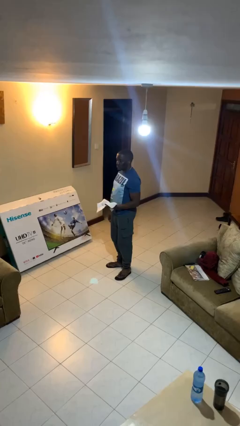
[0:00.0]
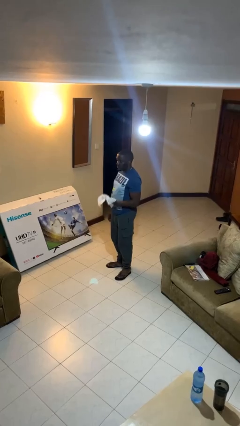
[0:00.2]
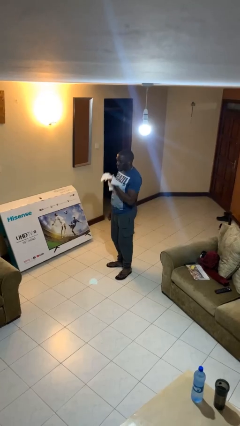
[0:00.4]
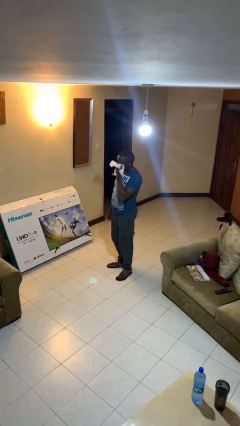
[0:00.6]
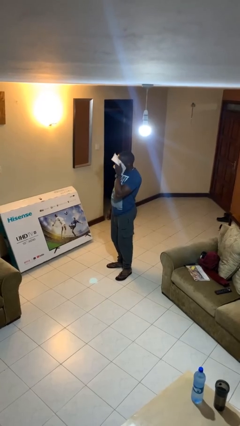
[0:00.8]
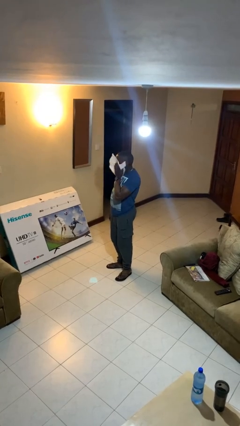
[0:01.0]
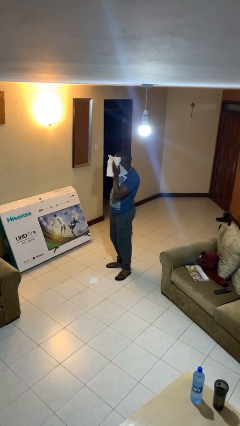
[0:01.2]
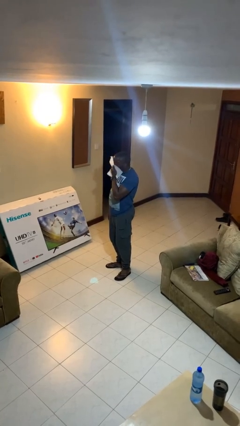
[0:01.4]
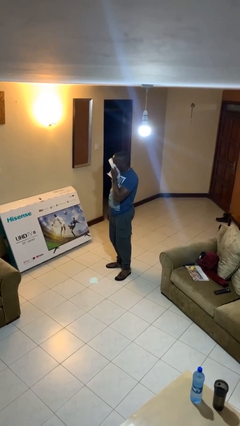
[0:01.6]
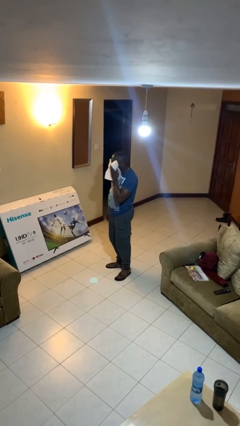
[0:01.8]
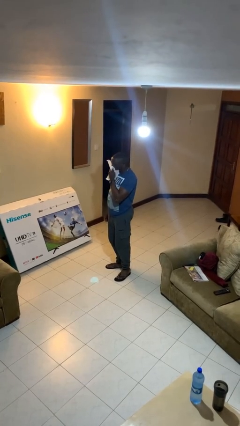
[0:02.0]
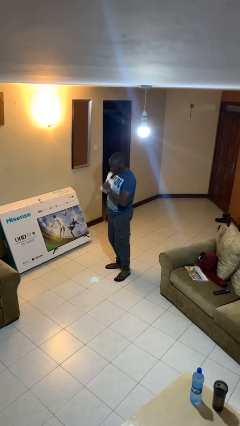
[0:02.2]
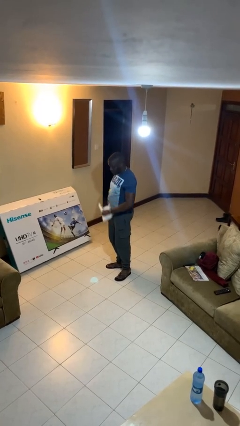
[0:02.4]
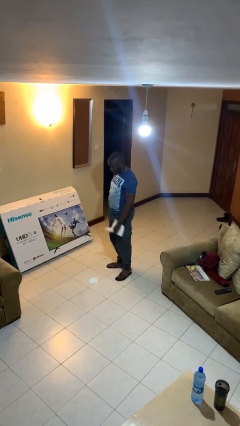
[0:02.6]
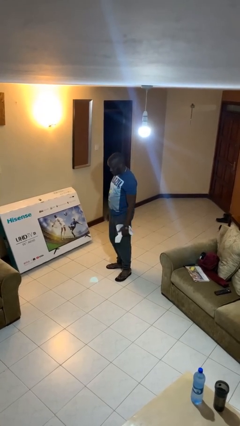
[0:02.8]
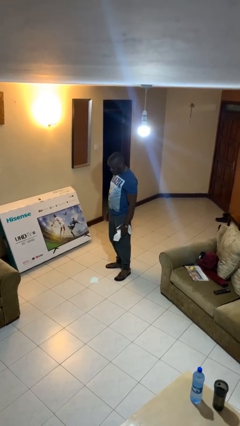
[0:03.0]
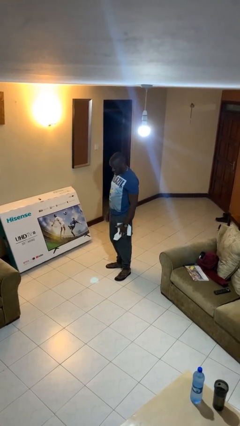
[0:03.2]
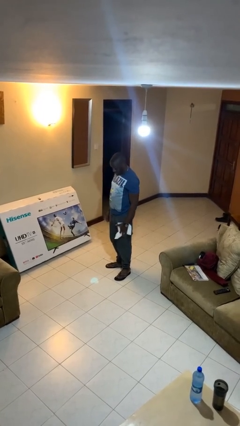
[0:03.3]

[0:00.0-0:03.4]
person wipes mouth with napkin

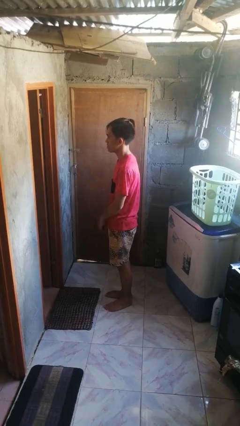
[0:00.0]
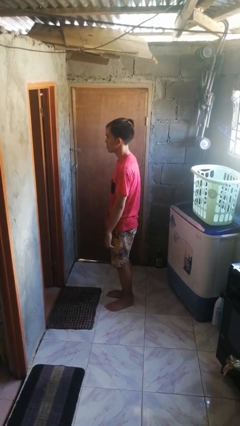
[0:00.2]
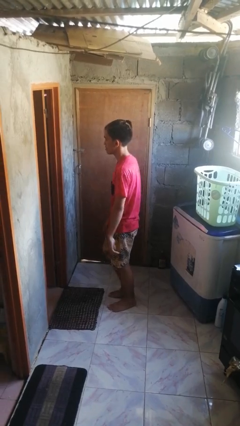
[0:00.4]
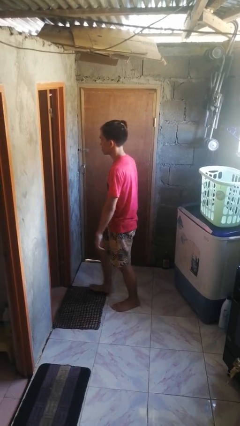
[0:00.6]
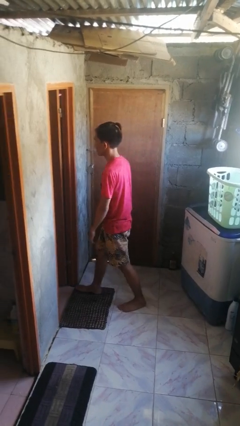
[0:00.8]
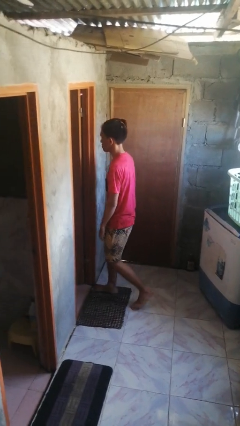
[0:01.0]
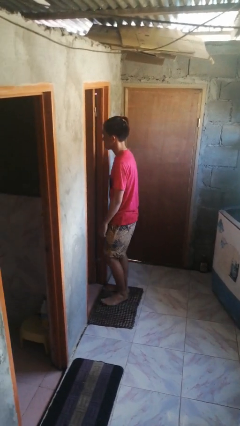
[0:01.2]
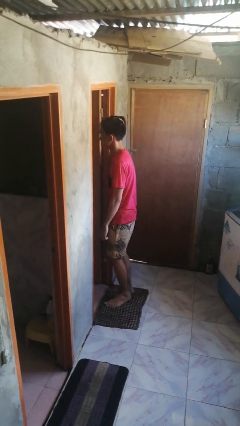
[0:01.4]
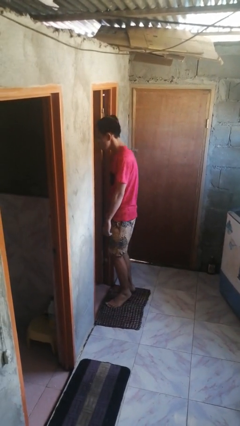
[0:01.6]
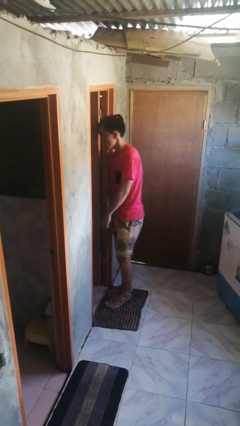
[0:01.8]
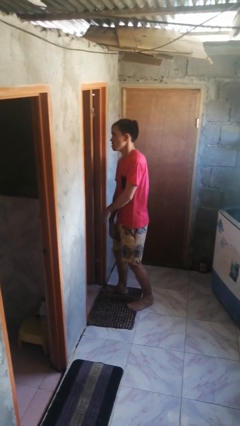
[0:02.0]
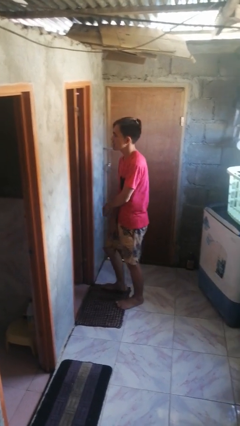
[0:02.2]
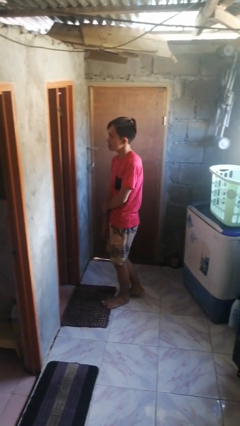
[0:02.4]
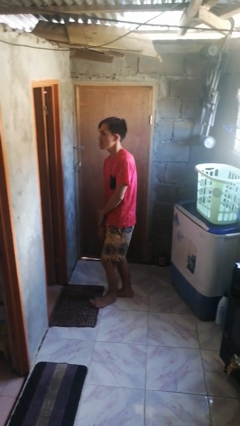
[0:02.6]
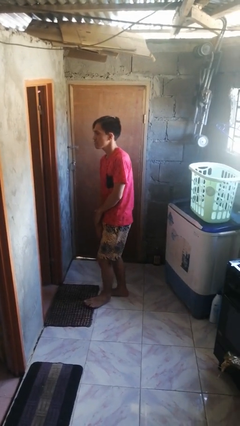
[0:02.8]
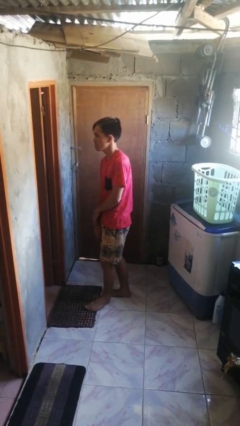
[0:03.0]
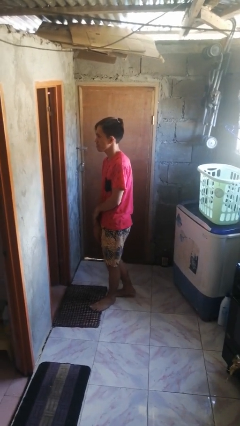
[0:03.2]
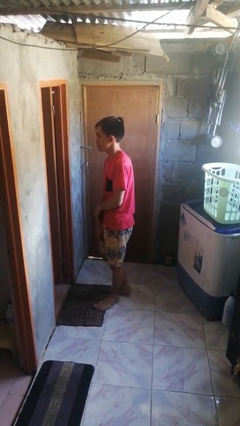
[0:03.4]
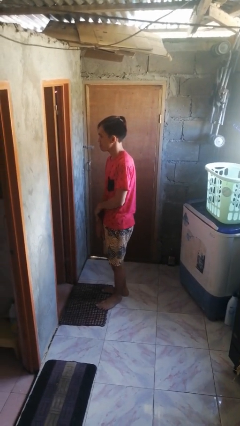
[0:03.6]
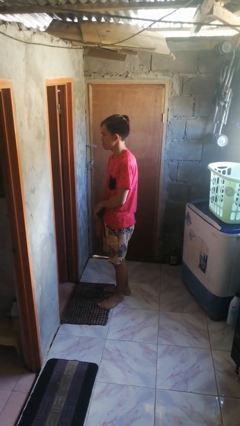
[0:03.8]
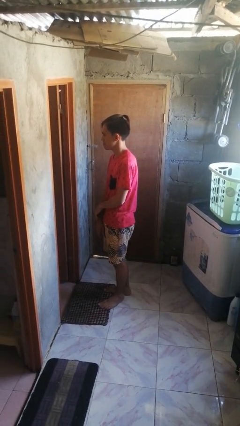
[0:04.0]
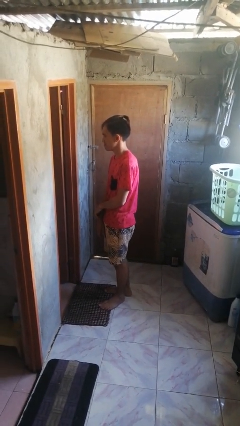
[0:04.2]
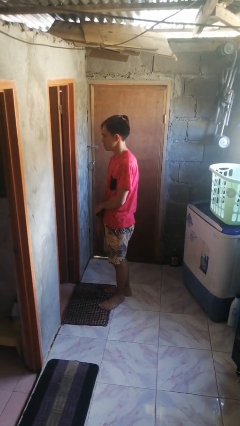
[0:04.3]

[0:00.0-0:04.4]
person bumps into wall

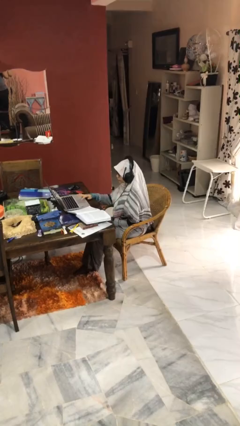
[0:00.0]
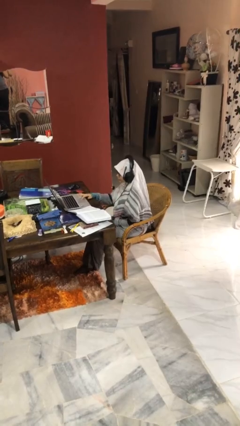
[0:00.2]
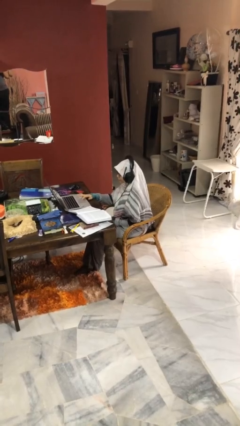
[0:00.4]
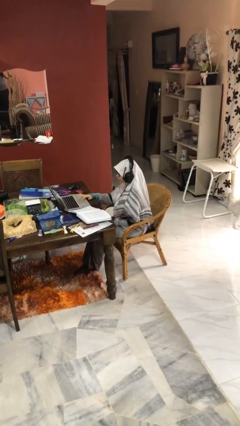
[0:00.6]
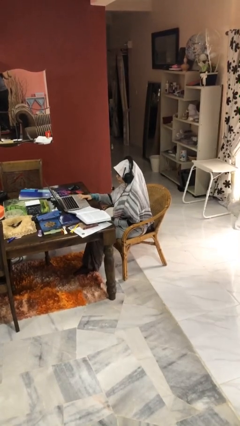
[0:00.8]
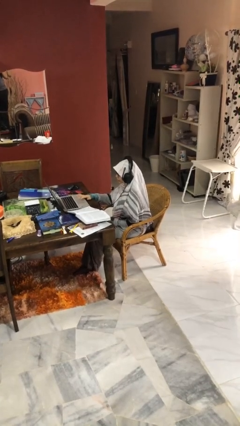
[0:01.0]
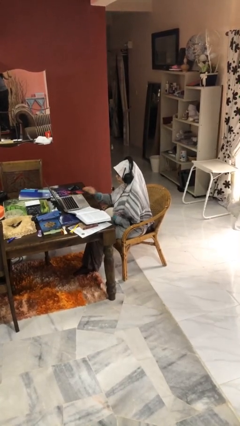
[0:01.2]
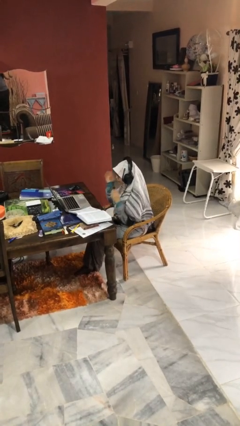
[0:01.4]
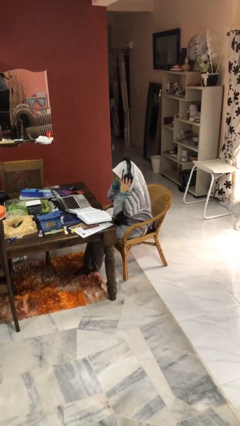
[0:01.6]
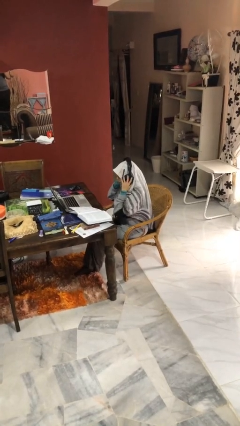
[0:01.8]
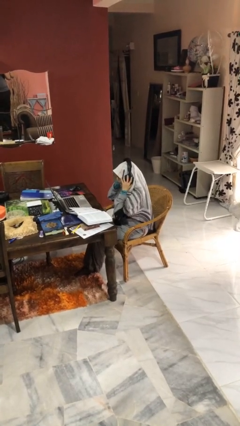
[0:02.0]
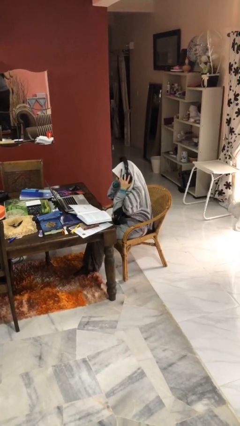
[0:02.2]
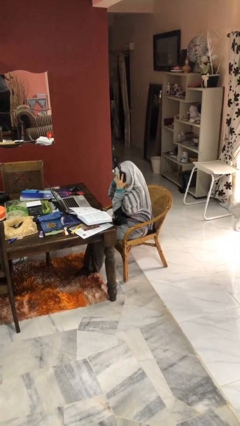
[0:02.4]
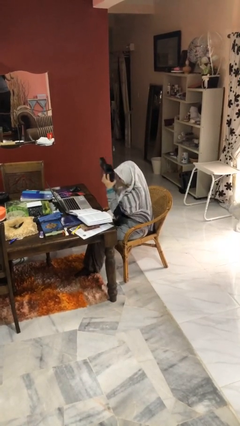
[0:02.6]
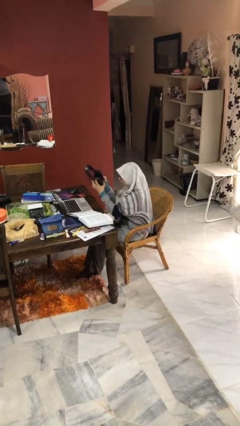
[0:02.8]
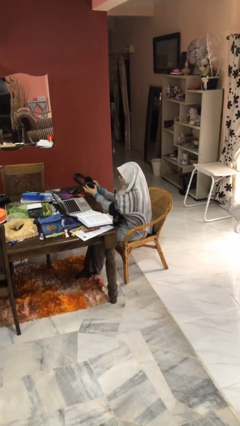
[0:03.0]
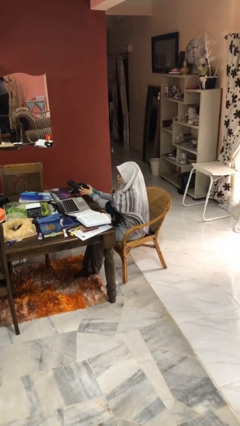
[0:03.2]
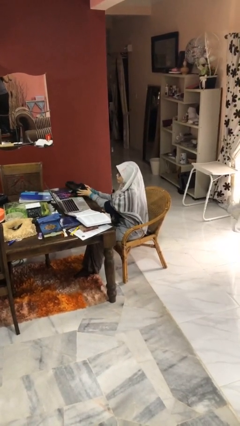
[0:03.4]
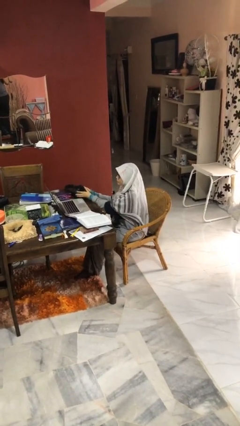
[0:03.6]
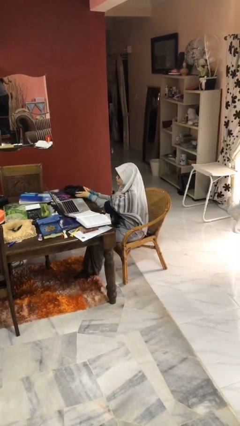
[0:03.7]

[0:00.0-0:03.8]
person takes off headphones

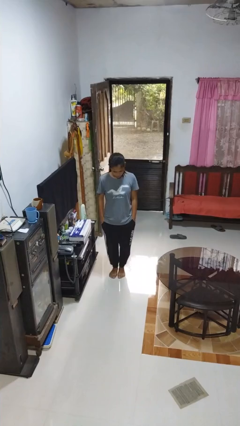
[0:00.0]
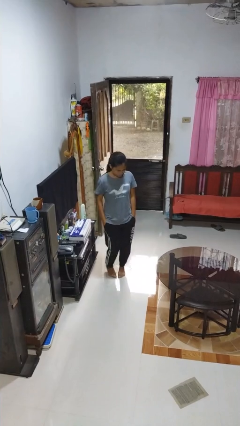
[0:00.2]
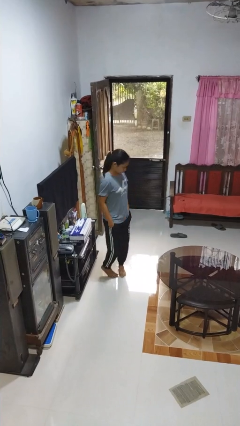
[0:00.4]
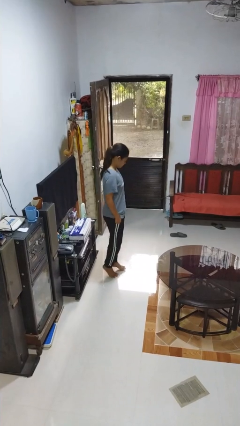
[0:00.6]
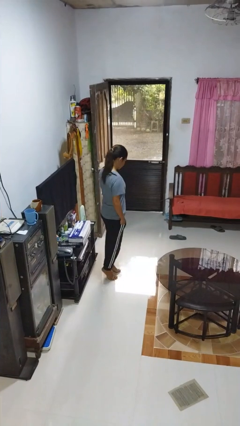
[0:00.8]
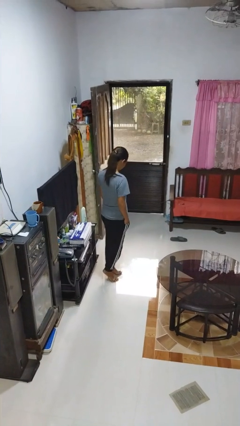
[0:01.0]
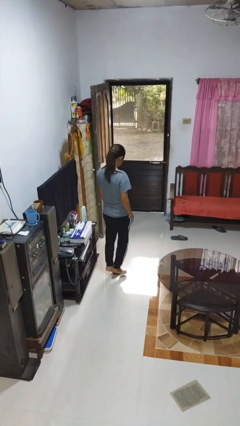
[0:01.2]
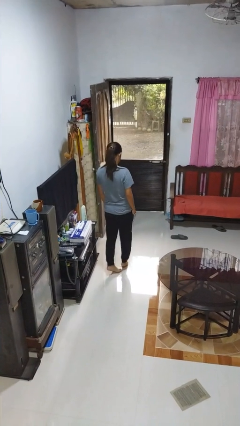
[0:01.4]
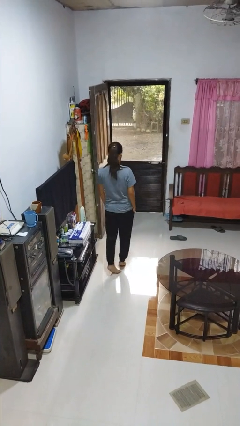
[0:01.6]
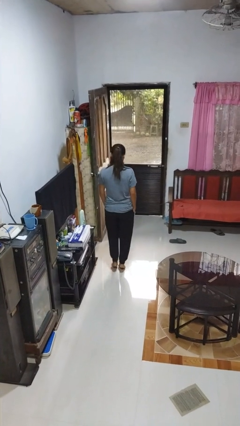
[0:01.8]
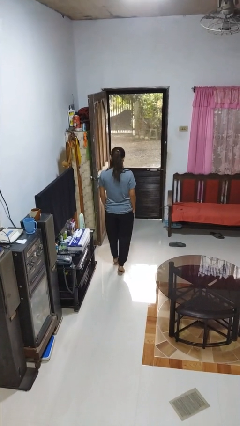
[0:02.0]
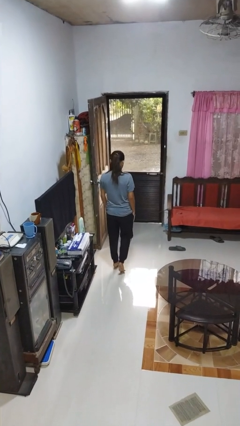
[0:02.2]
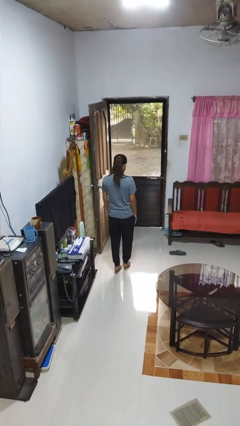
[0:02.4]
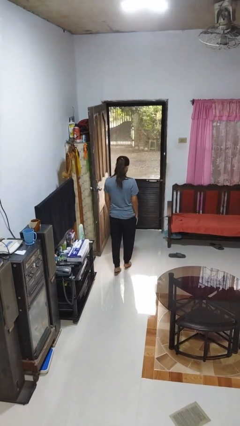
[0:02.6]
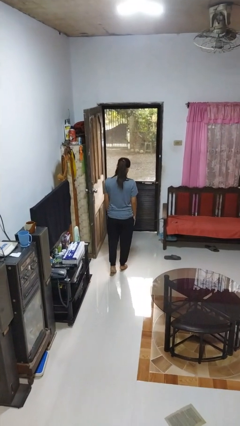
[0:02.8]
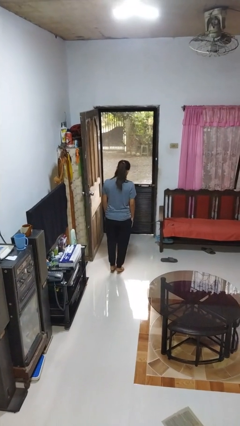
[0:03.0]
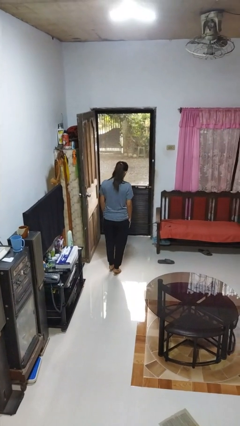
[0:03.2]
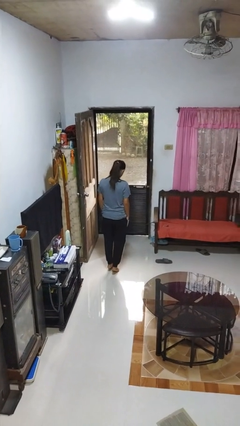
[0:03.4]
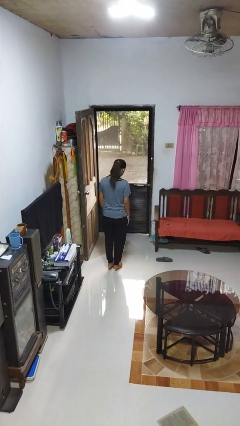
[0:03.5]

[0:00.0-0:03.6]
person walks tiptoe

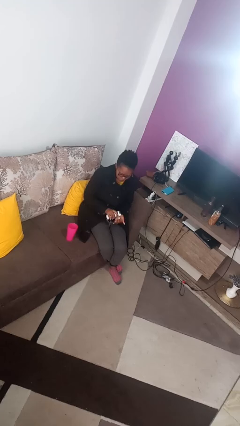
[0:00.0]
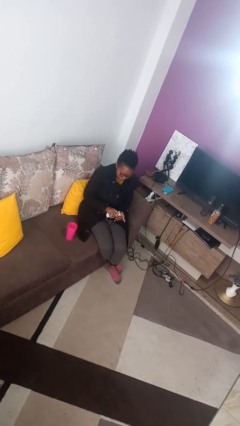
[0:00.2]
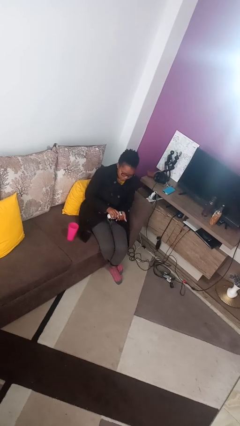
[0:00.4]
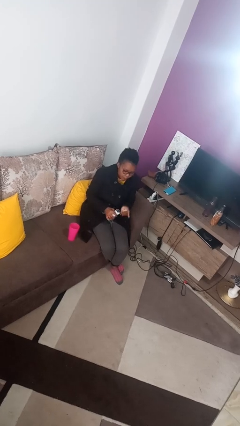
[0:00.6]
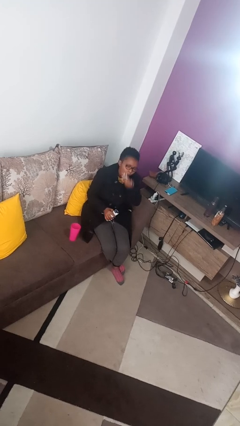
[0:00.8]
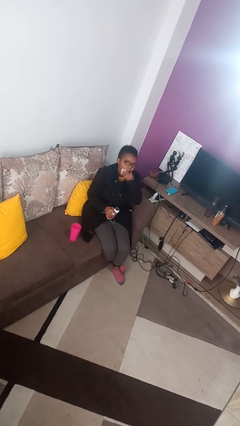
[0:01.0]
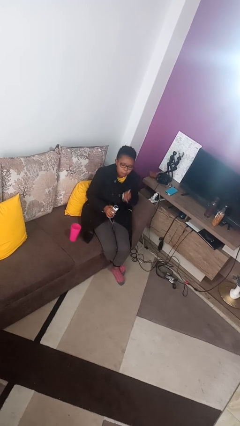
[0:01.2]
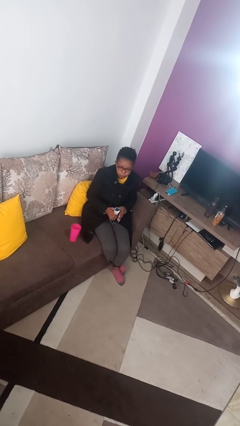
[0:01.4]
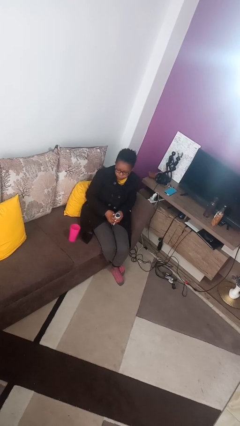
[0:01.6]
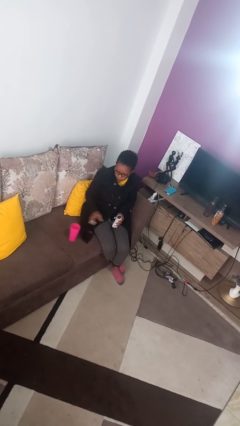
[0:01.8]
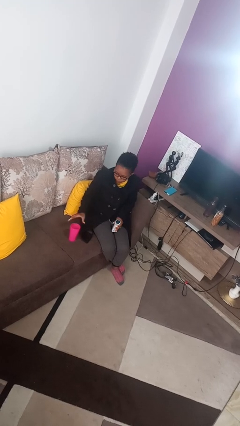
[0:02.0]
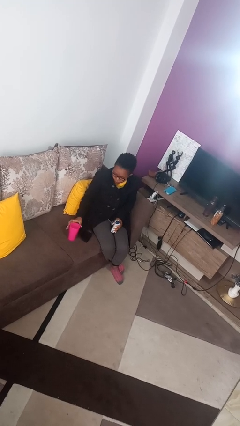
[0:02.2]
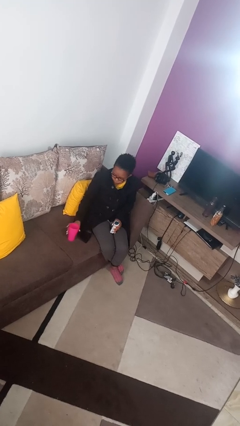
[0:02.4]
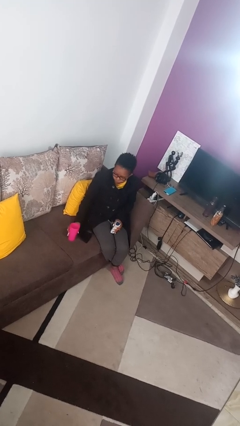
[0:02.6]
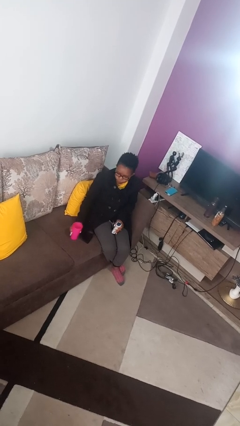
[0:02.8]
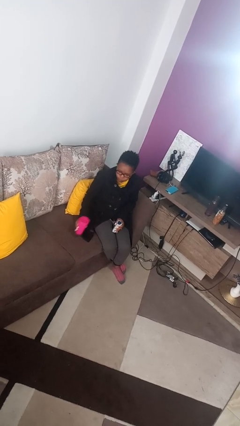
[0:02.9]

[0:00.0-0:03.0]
person takes medicine pills
